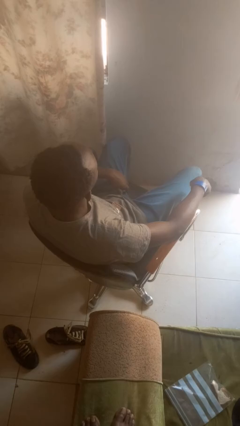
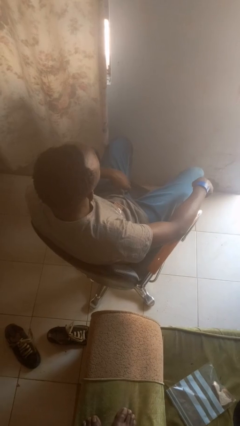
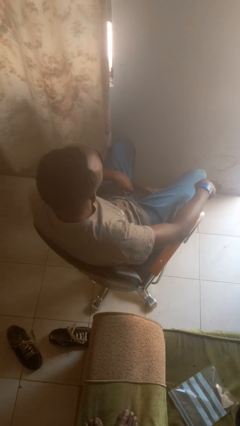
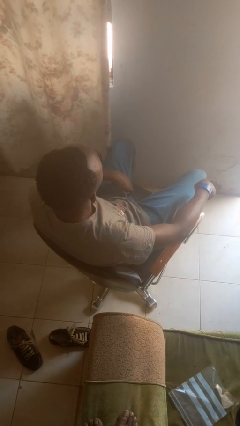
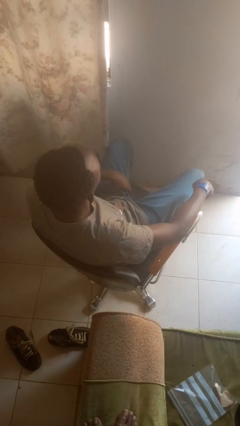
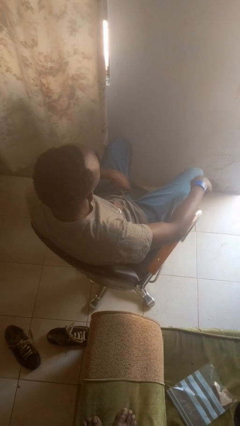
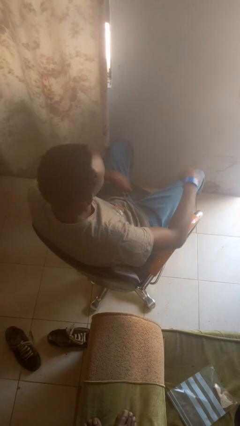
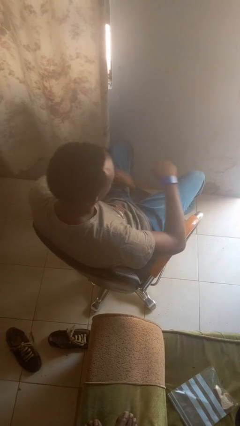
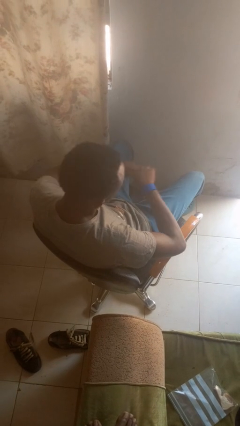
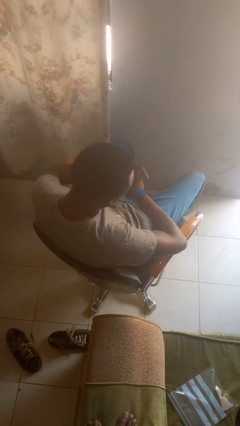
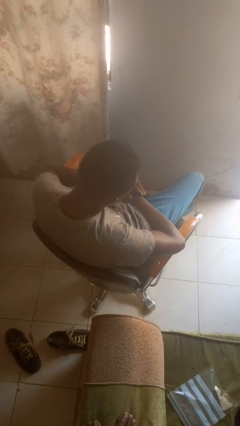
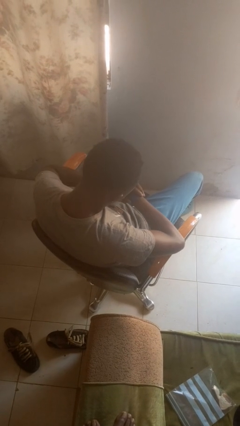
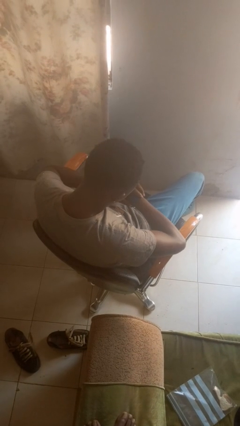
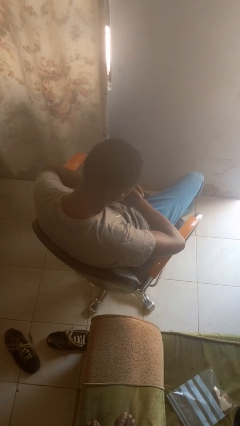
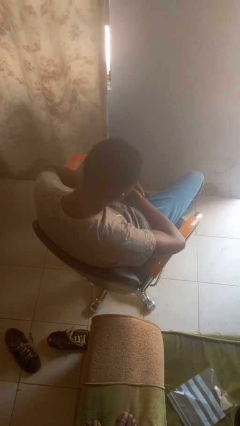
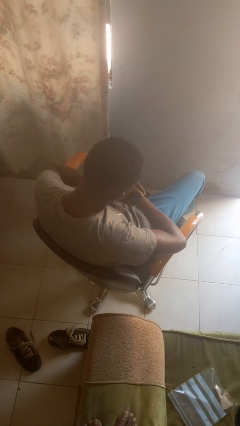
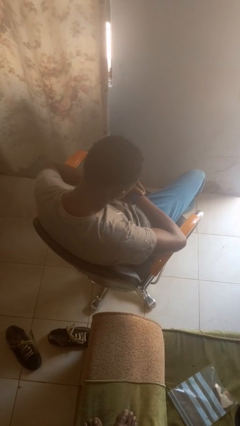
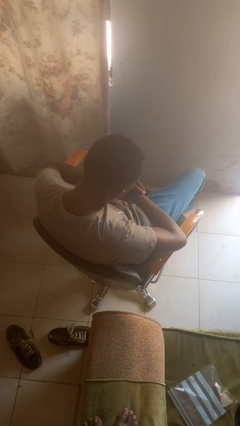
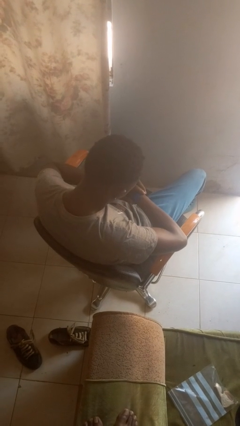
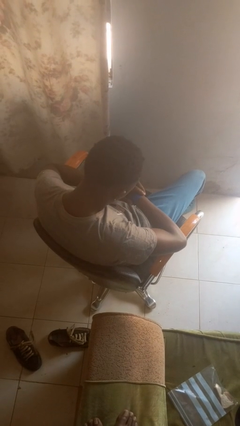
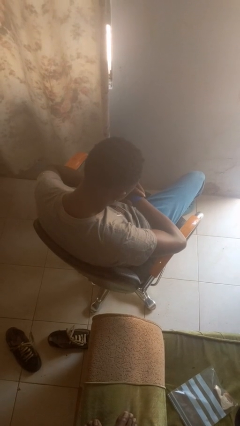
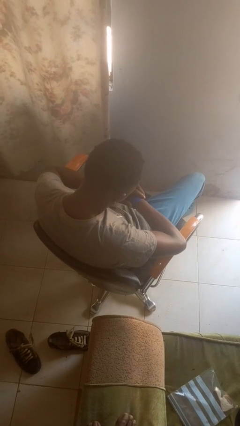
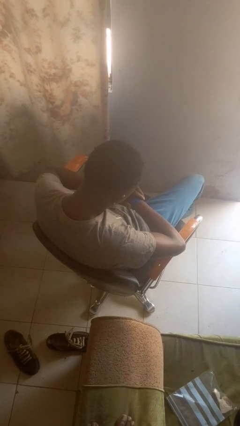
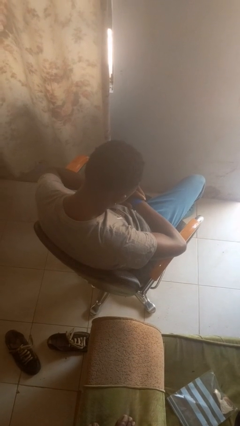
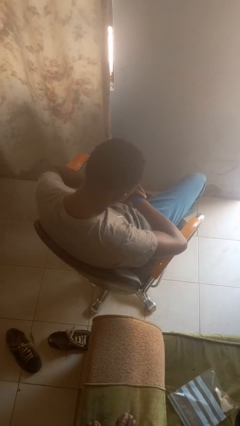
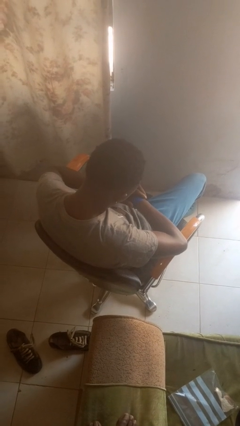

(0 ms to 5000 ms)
person looks at wristwatch

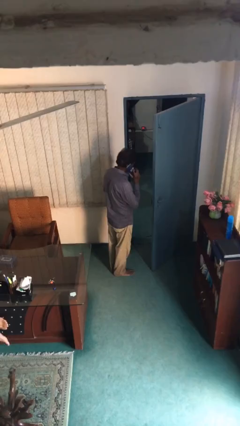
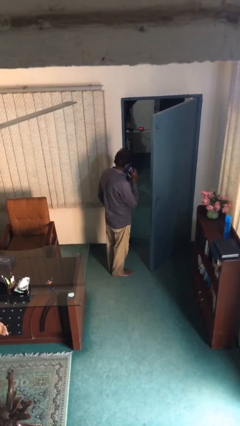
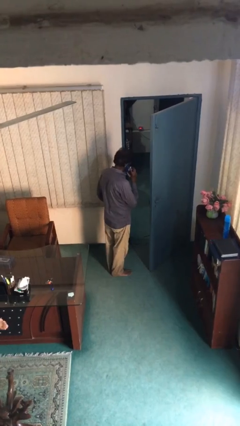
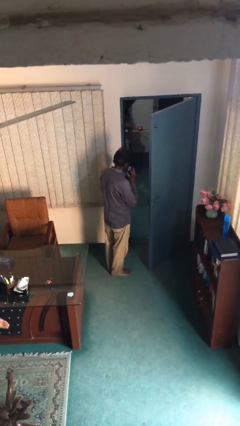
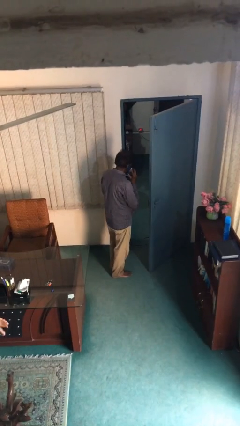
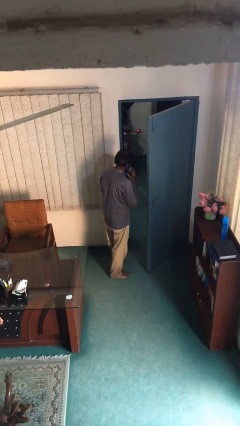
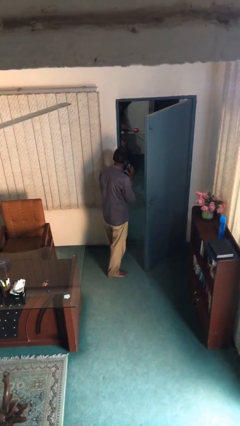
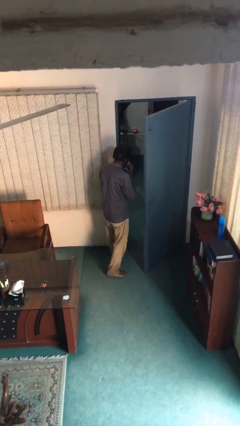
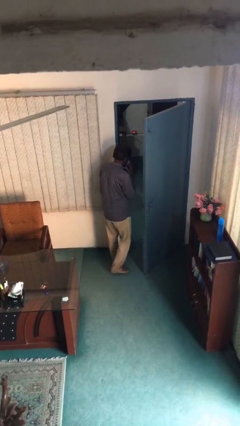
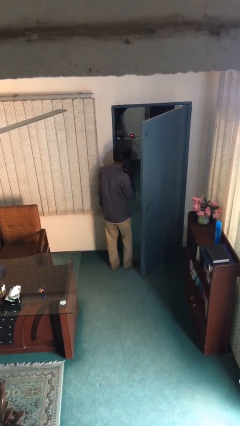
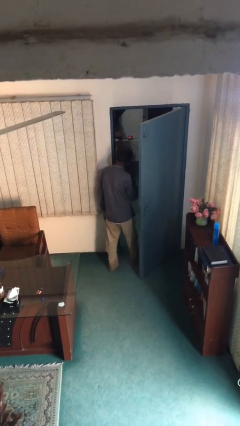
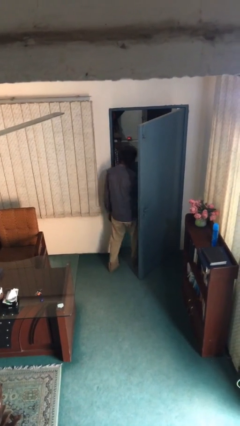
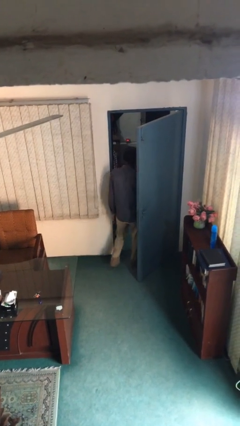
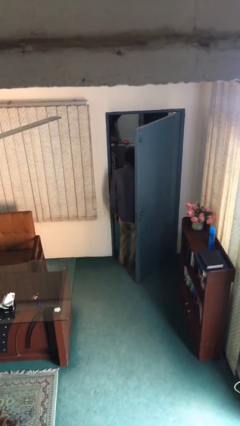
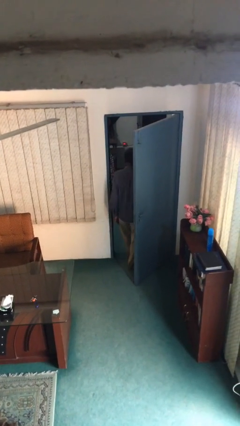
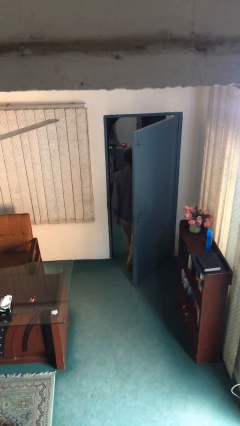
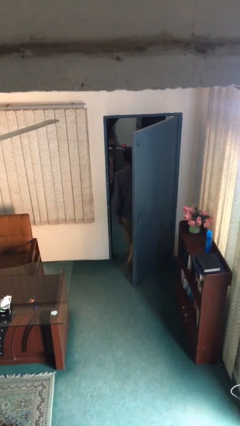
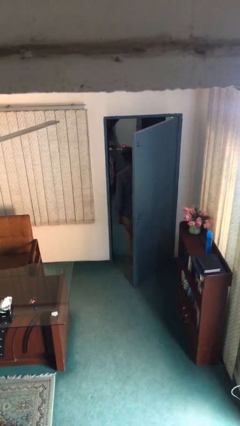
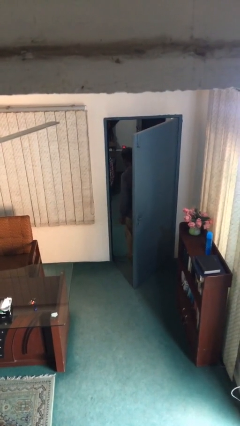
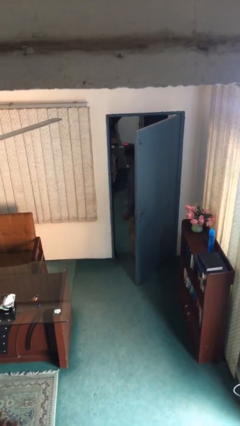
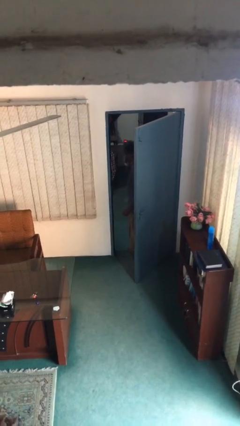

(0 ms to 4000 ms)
person exits scene through structure

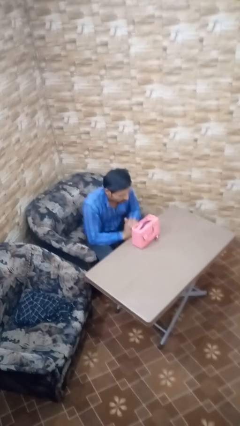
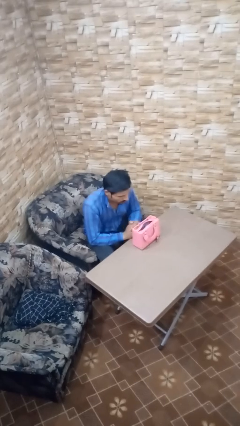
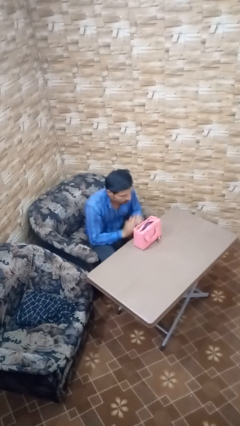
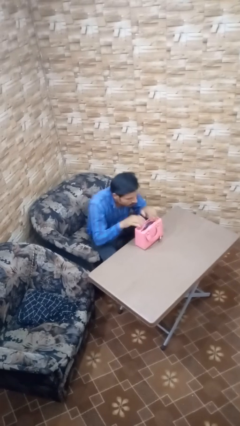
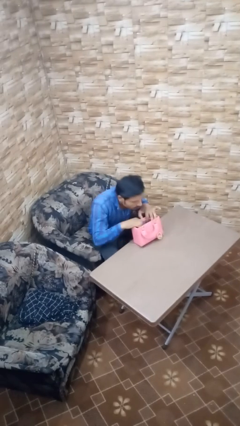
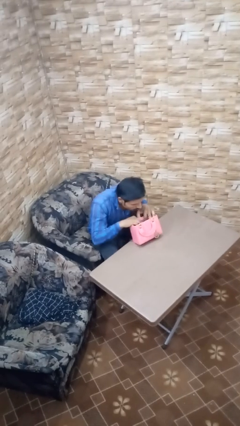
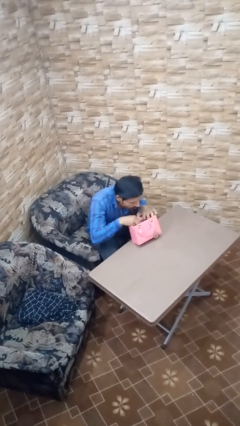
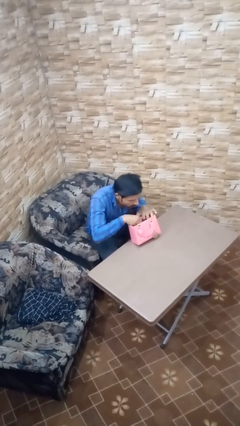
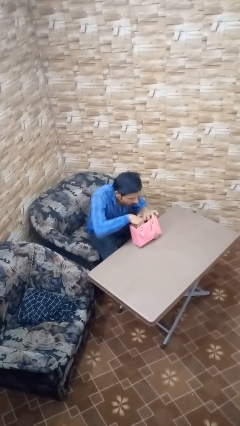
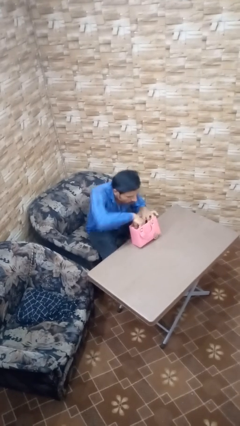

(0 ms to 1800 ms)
person searches in purse

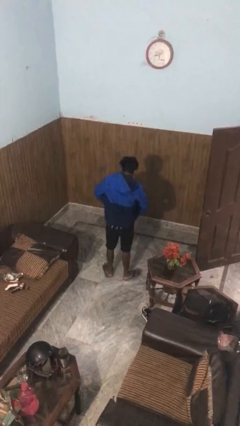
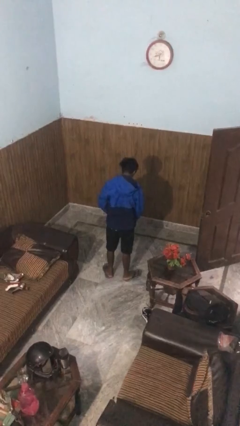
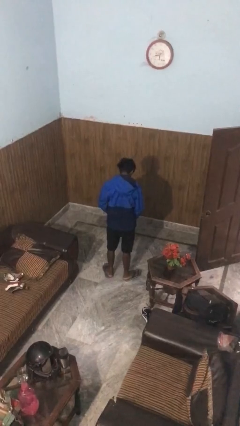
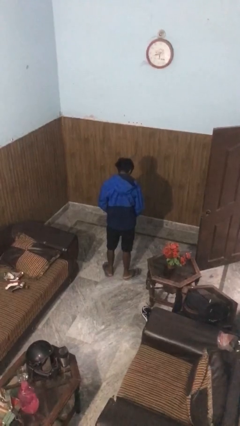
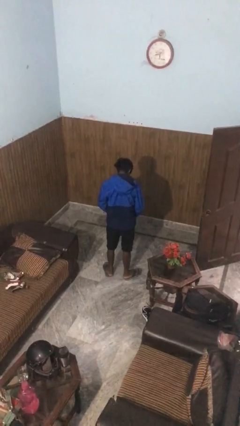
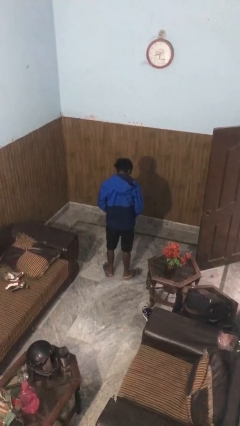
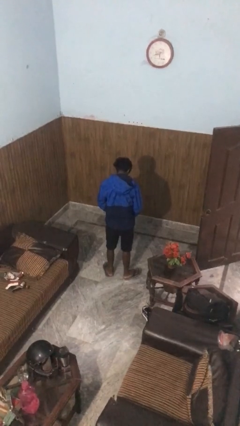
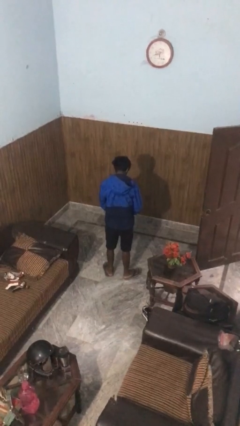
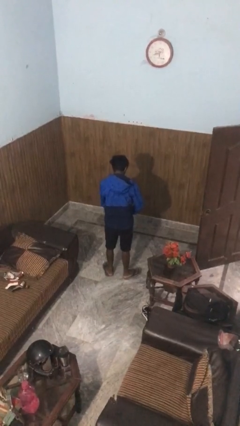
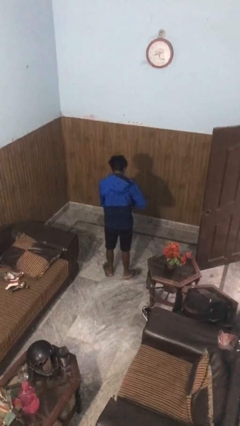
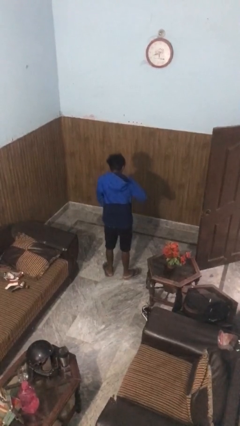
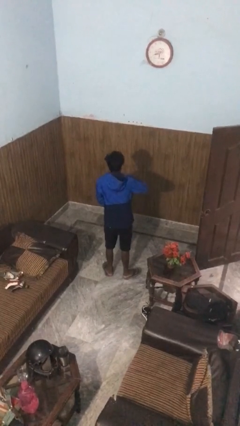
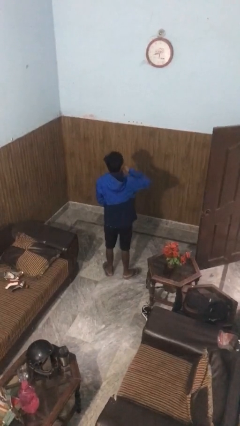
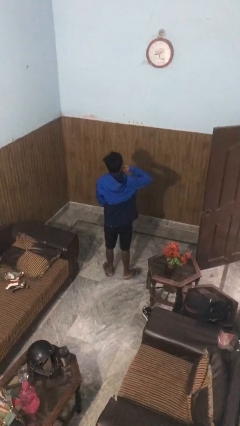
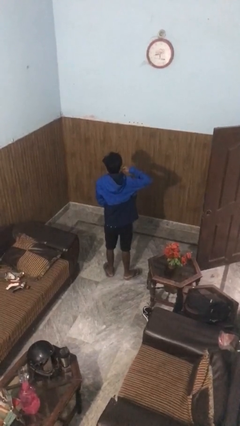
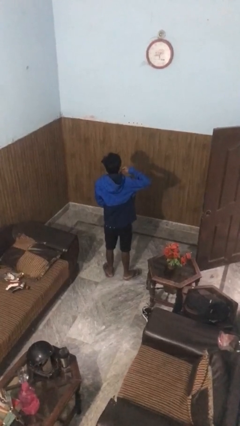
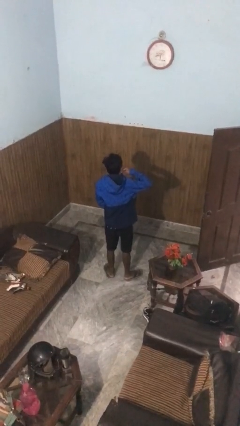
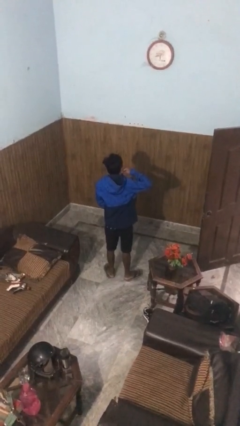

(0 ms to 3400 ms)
person zips up jacket

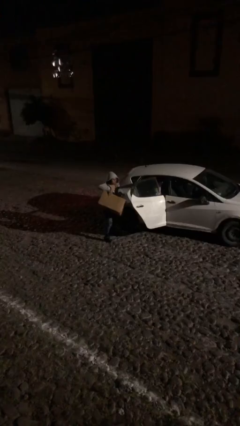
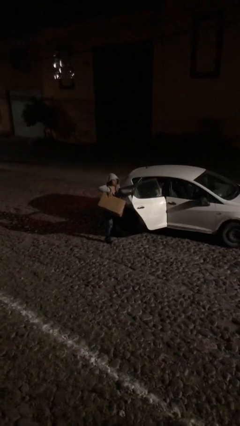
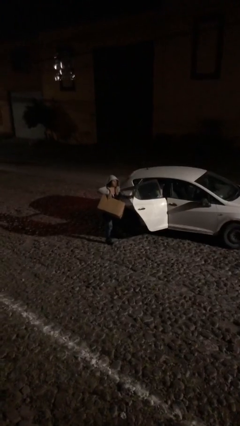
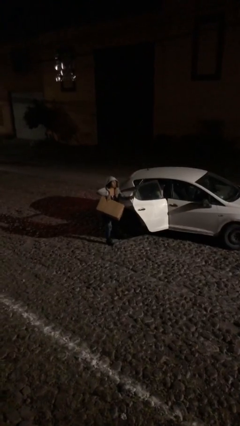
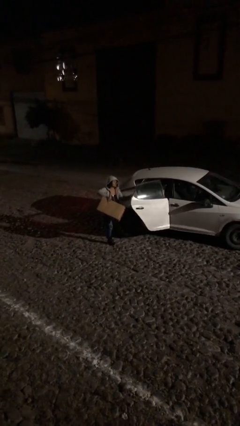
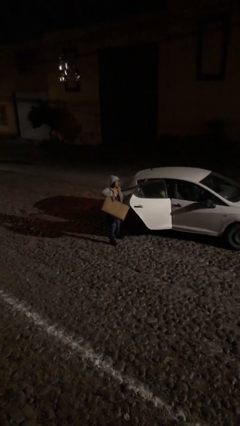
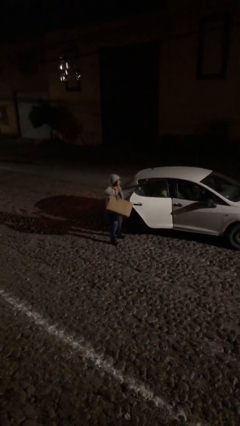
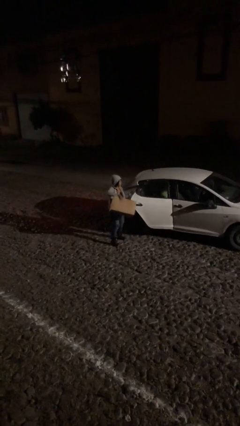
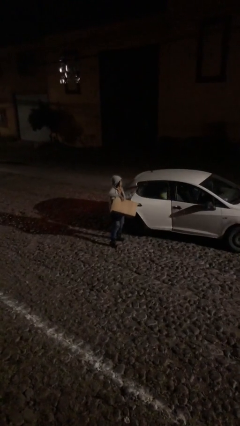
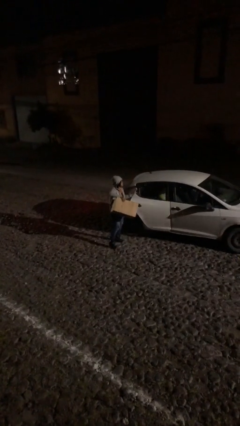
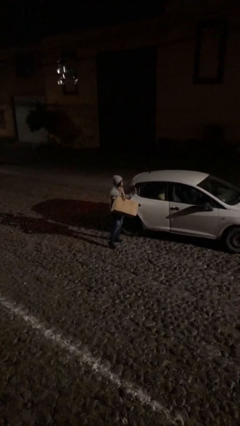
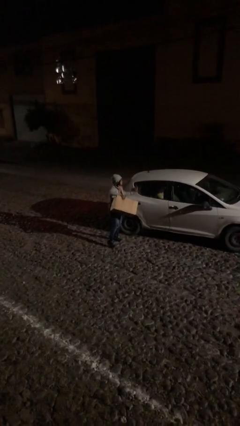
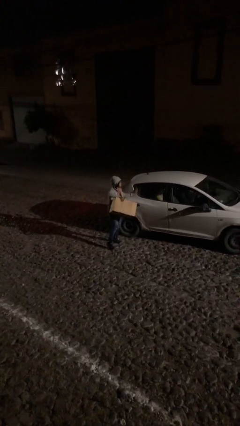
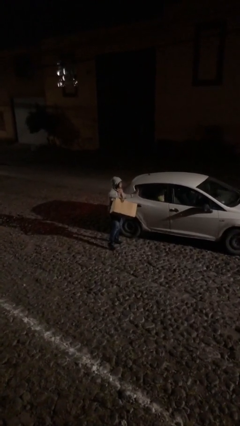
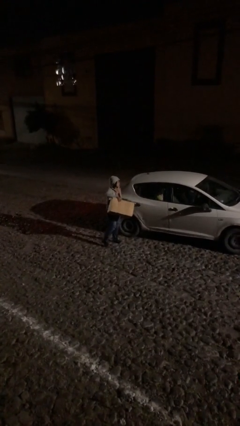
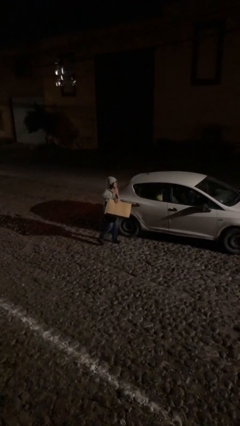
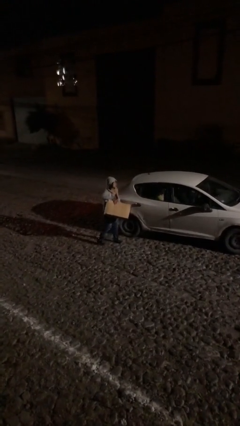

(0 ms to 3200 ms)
person closes car door

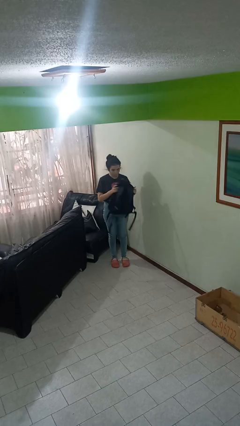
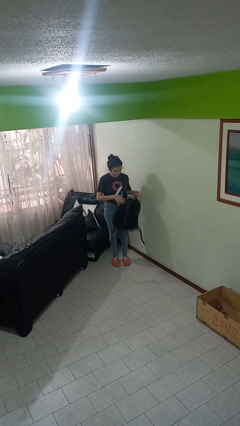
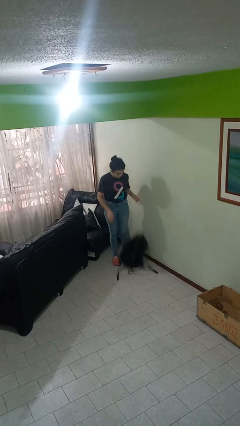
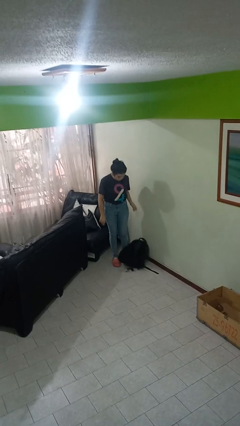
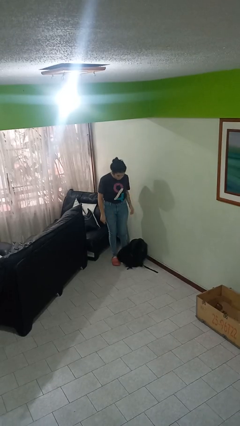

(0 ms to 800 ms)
person drops object
